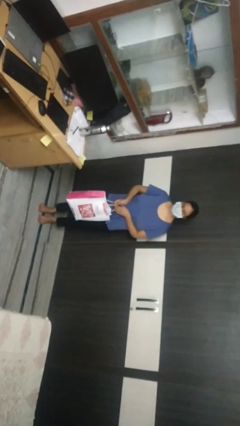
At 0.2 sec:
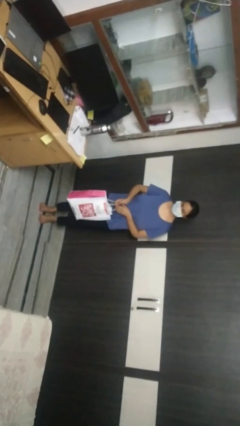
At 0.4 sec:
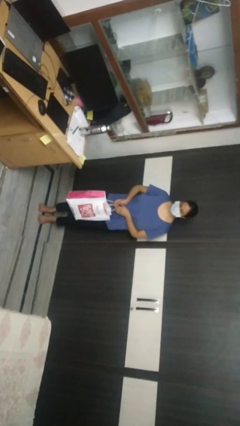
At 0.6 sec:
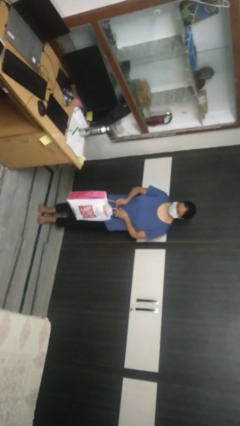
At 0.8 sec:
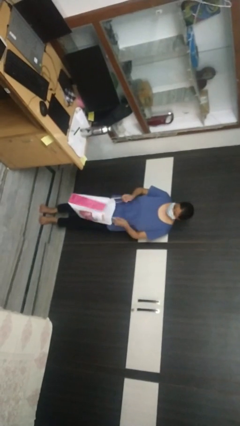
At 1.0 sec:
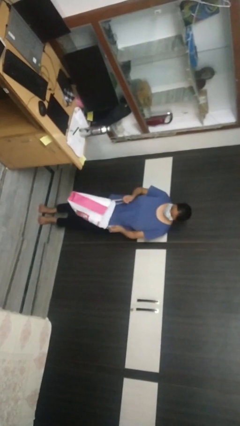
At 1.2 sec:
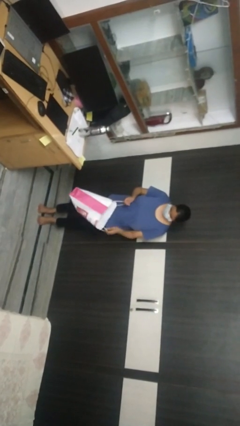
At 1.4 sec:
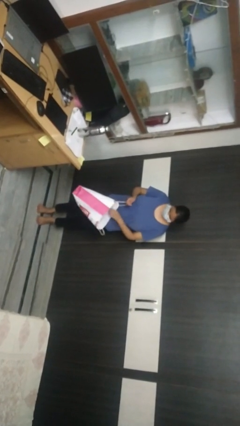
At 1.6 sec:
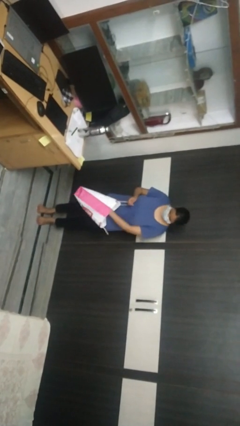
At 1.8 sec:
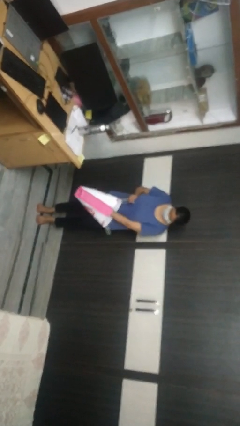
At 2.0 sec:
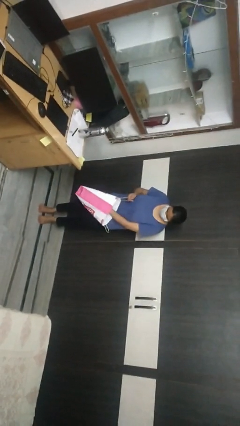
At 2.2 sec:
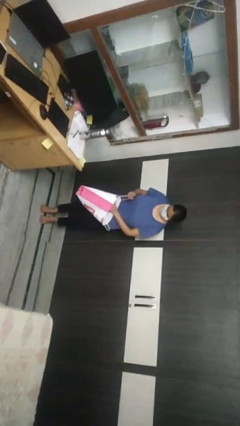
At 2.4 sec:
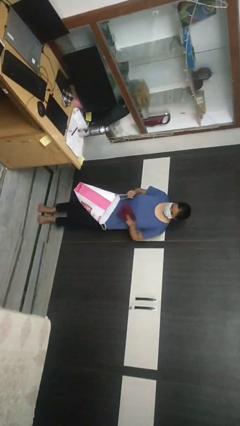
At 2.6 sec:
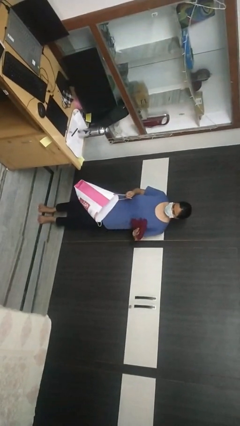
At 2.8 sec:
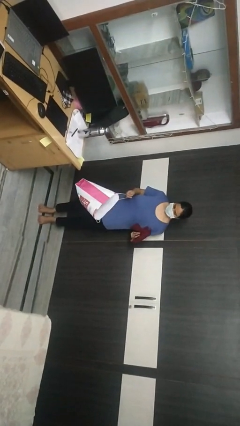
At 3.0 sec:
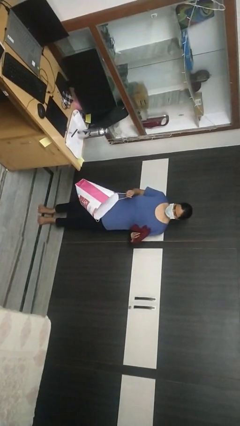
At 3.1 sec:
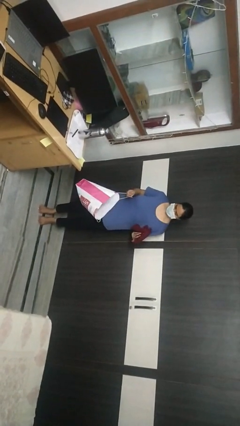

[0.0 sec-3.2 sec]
person takes object from bag

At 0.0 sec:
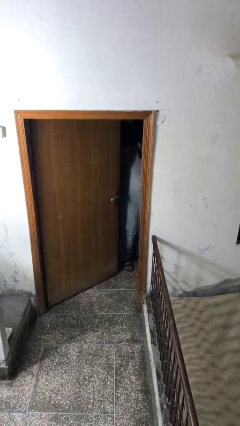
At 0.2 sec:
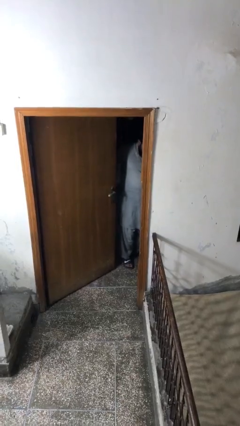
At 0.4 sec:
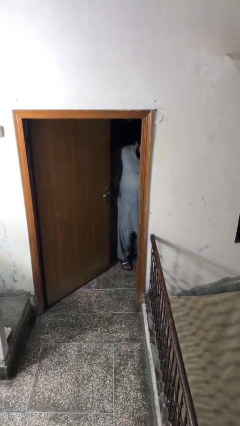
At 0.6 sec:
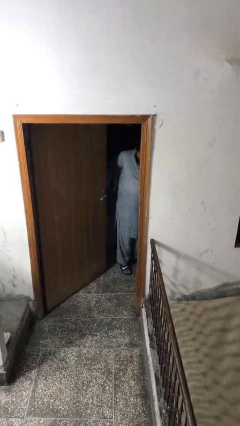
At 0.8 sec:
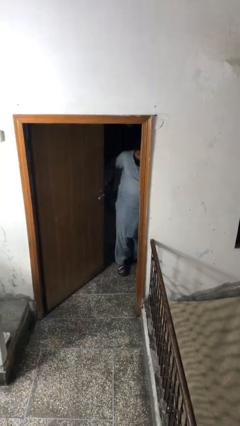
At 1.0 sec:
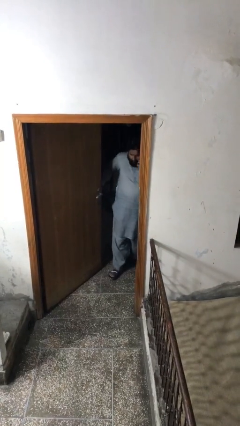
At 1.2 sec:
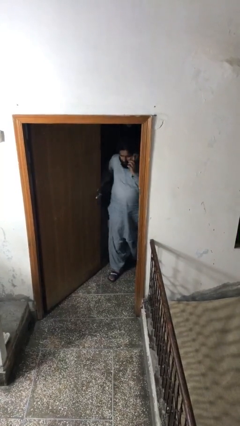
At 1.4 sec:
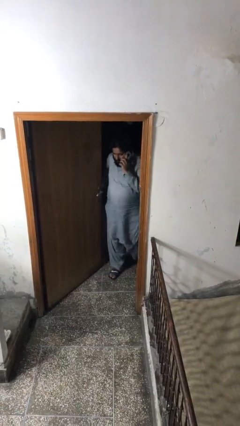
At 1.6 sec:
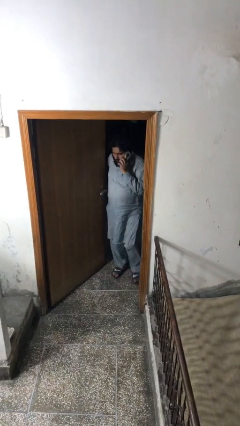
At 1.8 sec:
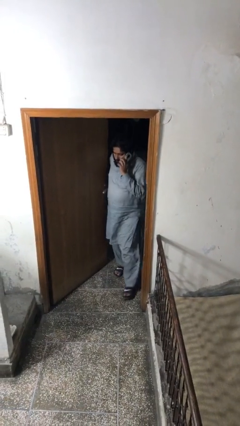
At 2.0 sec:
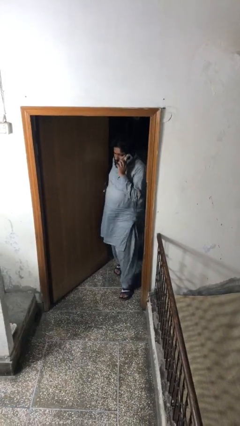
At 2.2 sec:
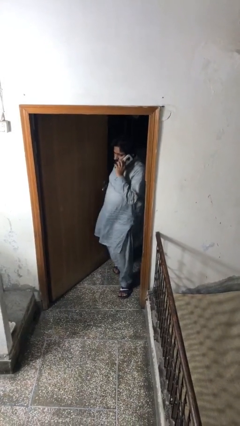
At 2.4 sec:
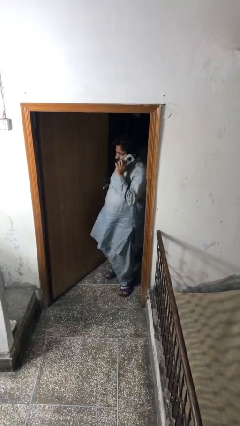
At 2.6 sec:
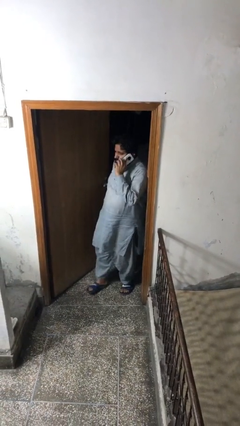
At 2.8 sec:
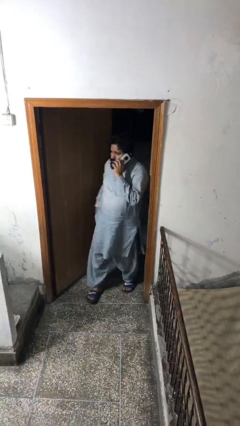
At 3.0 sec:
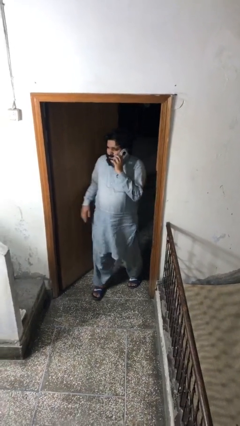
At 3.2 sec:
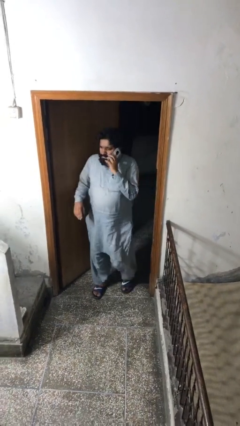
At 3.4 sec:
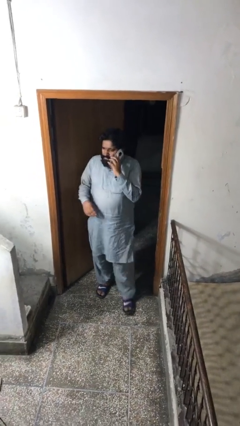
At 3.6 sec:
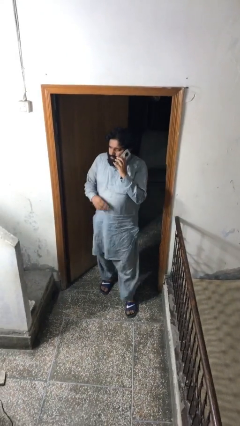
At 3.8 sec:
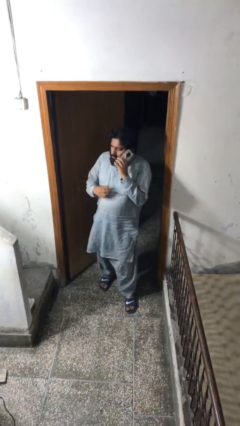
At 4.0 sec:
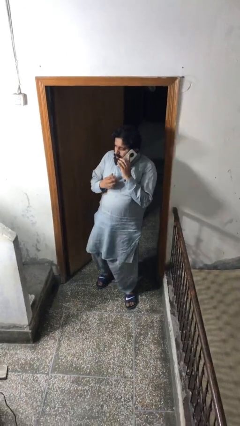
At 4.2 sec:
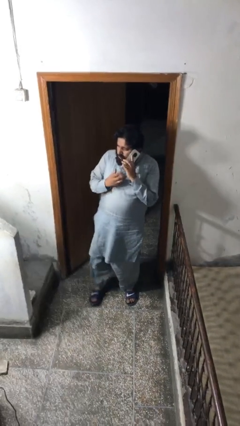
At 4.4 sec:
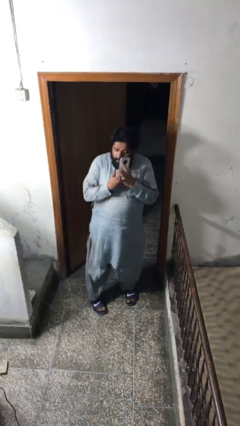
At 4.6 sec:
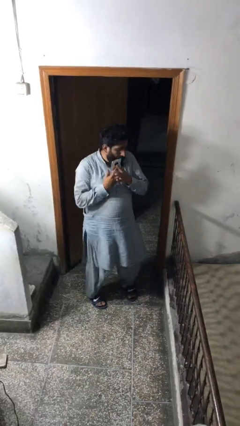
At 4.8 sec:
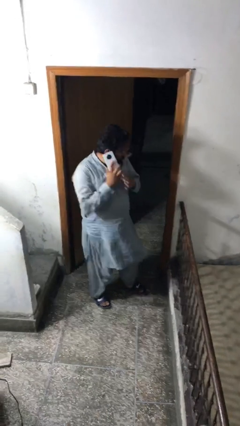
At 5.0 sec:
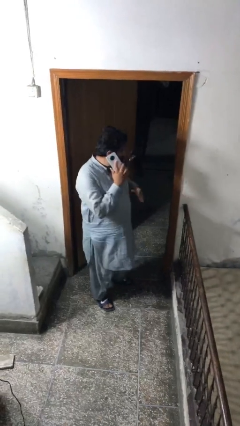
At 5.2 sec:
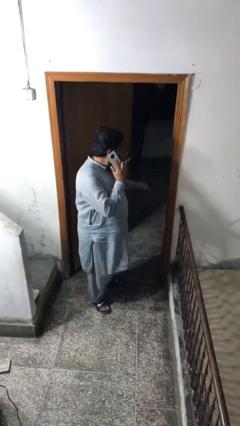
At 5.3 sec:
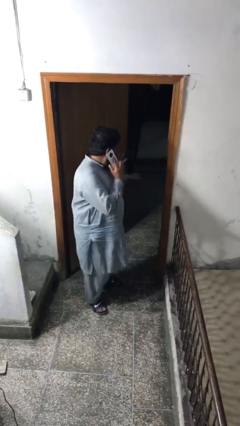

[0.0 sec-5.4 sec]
person enters scene through structure

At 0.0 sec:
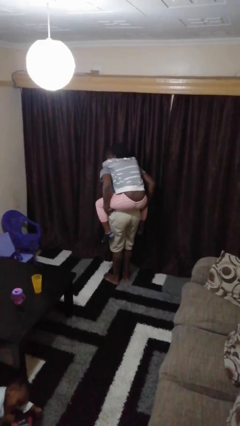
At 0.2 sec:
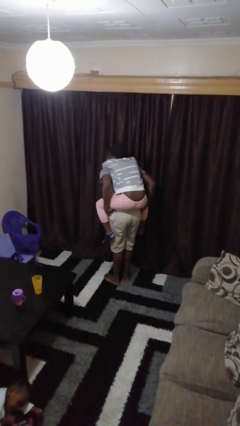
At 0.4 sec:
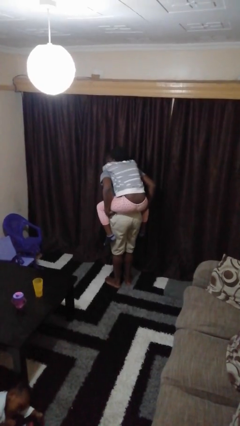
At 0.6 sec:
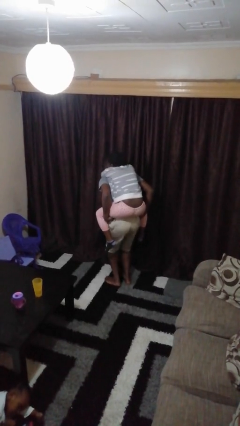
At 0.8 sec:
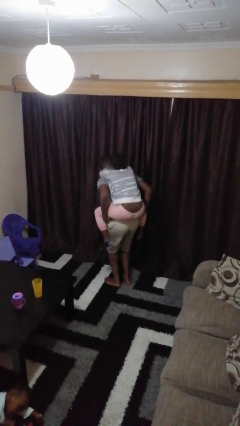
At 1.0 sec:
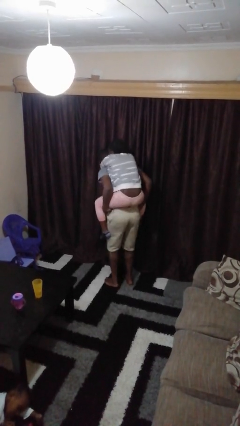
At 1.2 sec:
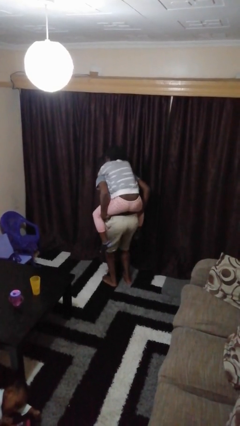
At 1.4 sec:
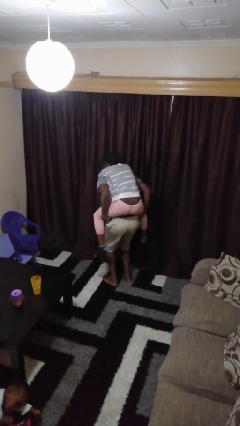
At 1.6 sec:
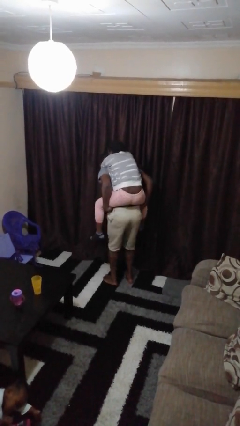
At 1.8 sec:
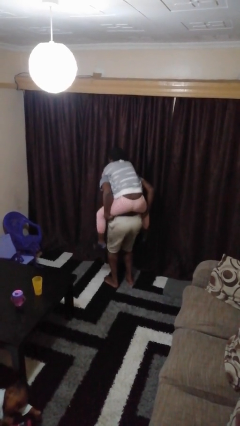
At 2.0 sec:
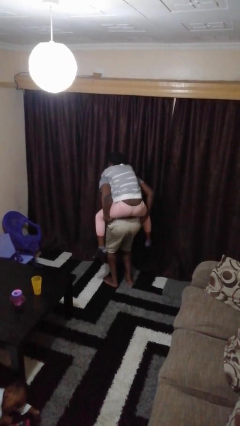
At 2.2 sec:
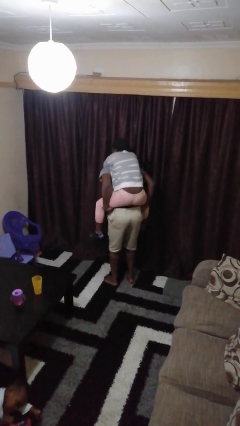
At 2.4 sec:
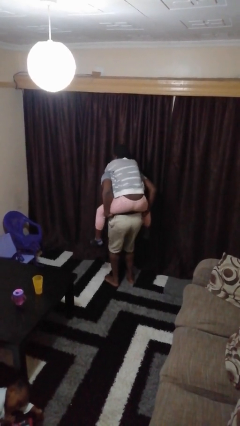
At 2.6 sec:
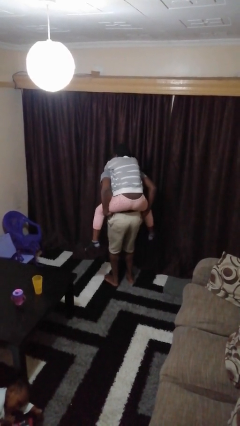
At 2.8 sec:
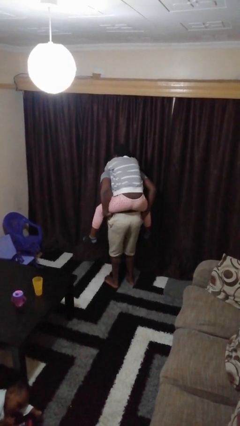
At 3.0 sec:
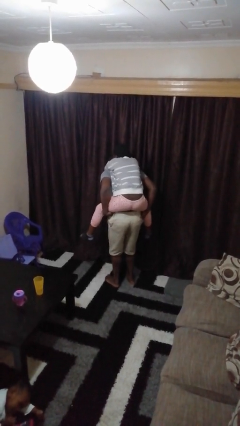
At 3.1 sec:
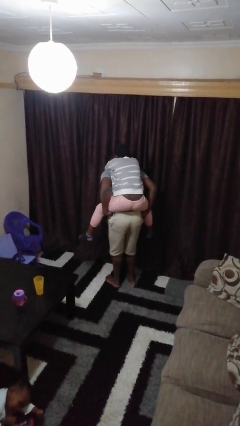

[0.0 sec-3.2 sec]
person carries person on back

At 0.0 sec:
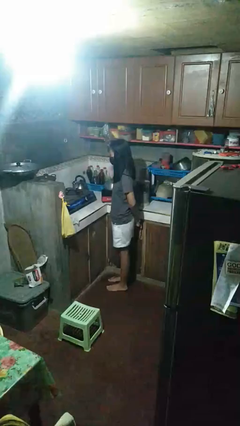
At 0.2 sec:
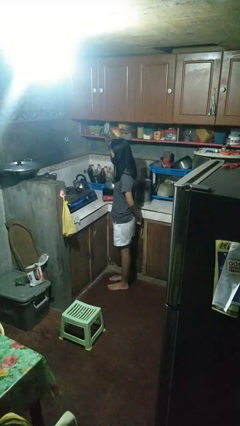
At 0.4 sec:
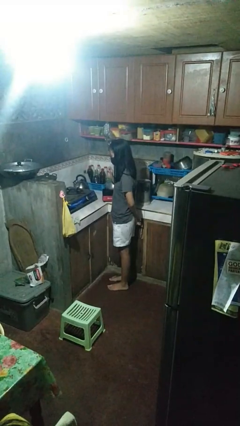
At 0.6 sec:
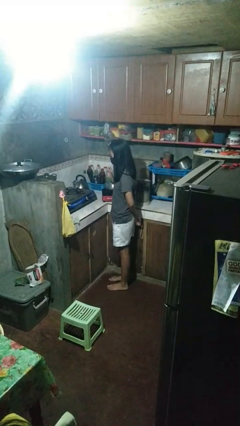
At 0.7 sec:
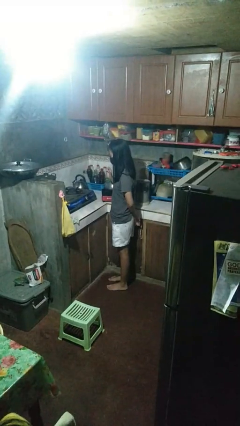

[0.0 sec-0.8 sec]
person burns hand

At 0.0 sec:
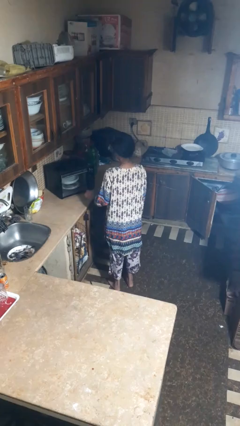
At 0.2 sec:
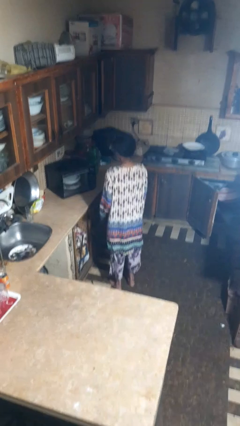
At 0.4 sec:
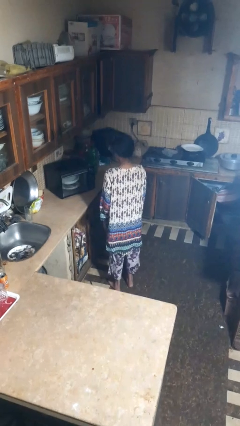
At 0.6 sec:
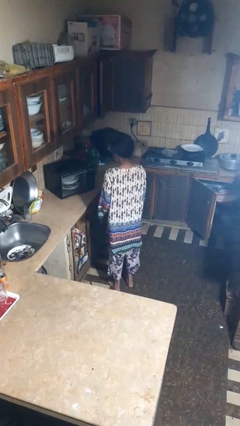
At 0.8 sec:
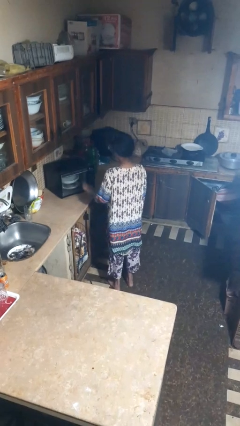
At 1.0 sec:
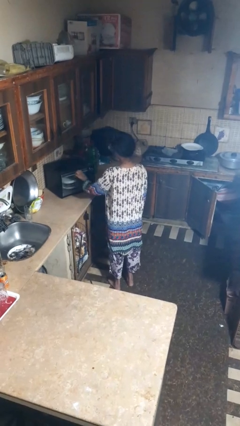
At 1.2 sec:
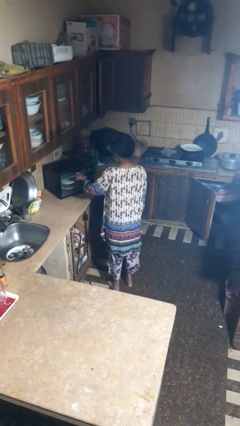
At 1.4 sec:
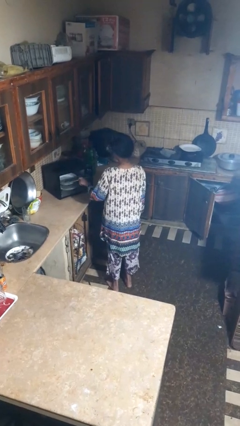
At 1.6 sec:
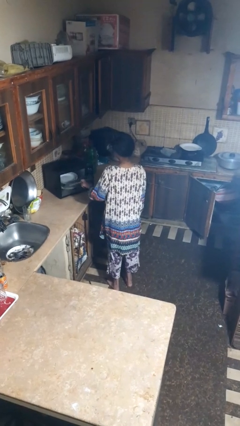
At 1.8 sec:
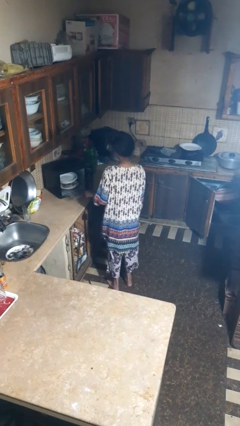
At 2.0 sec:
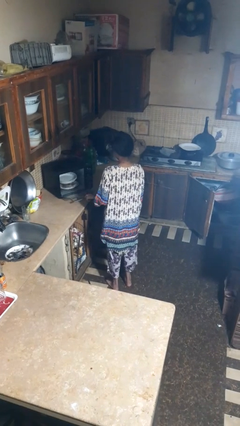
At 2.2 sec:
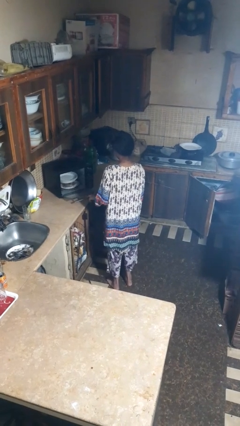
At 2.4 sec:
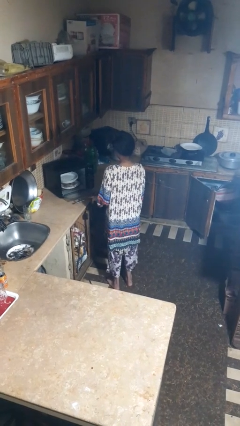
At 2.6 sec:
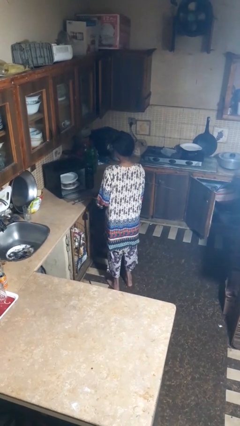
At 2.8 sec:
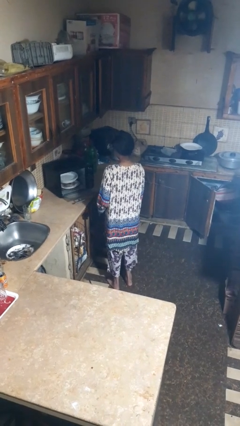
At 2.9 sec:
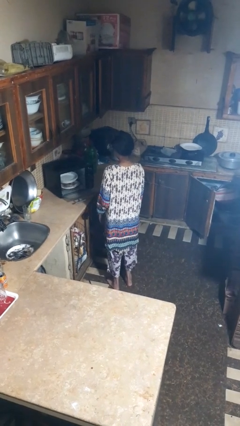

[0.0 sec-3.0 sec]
person opens dishwasher

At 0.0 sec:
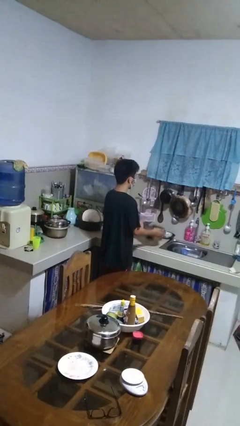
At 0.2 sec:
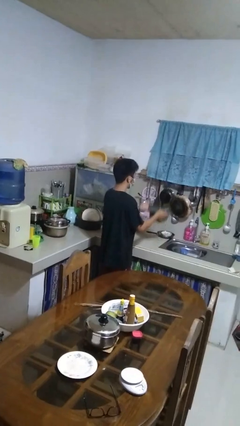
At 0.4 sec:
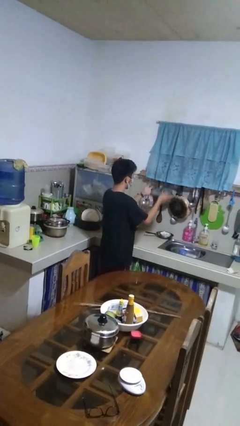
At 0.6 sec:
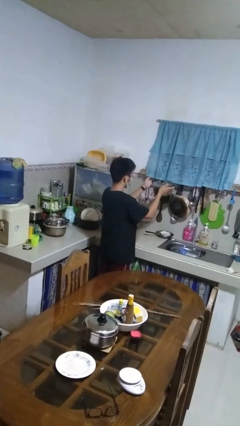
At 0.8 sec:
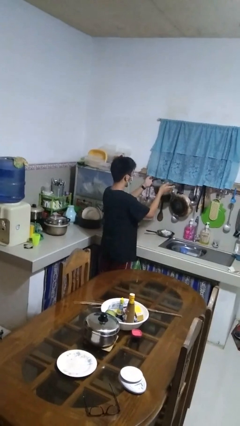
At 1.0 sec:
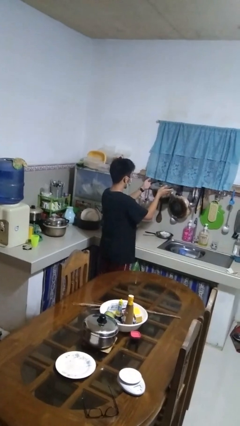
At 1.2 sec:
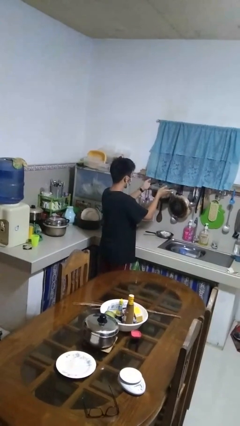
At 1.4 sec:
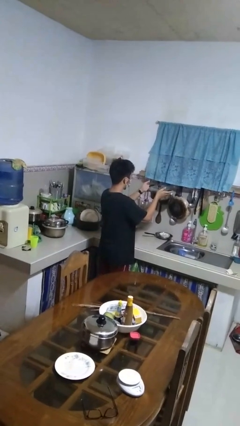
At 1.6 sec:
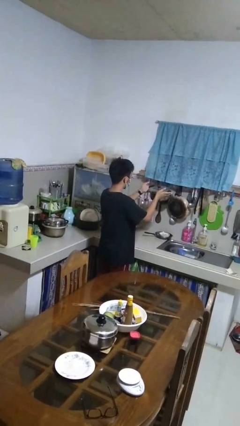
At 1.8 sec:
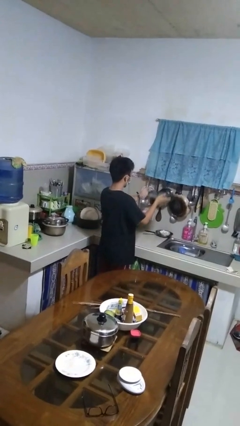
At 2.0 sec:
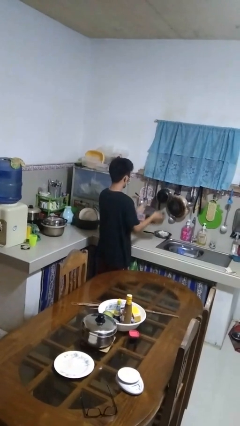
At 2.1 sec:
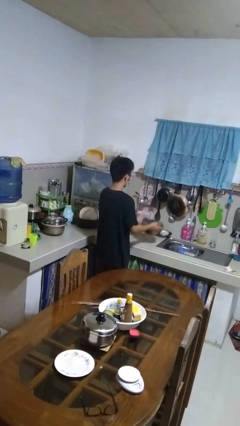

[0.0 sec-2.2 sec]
person picks up object from countertop
